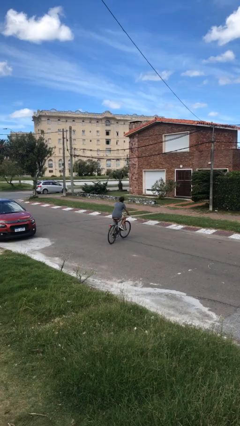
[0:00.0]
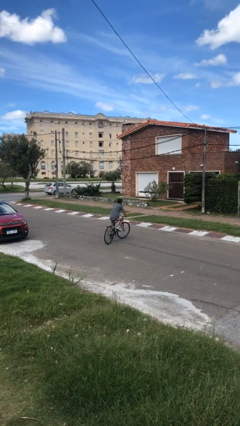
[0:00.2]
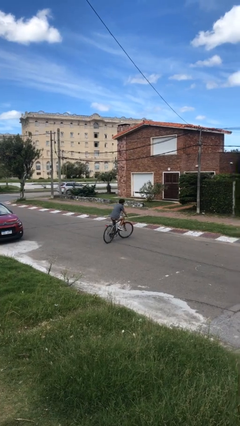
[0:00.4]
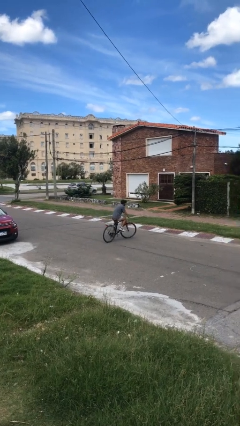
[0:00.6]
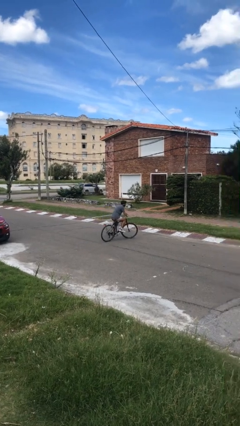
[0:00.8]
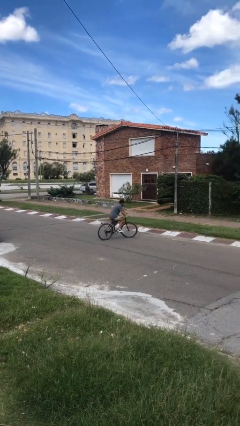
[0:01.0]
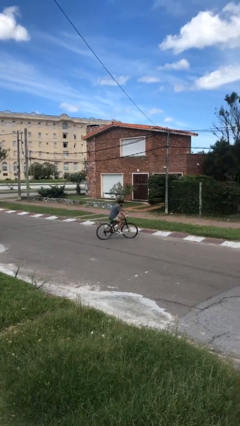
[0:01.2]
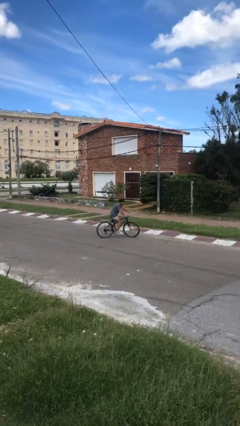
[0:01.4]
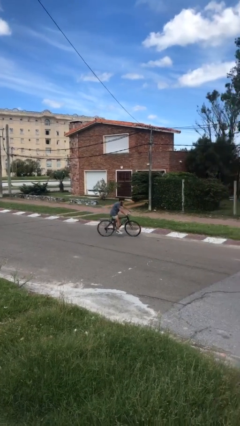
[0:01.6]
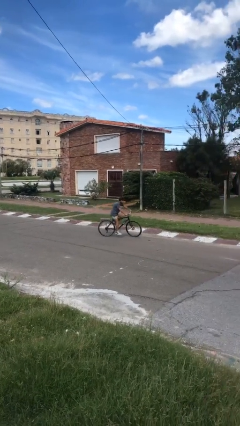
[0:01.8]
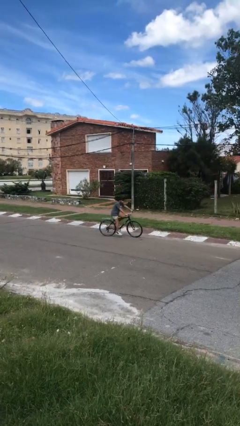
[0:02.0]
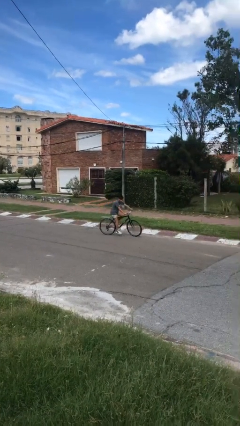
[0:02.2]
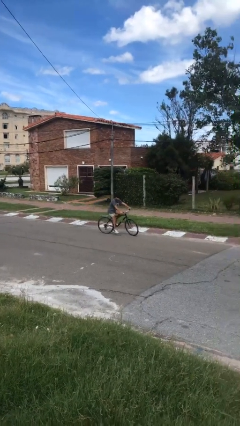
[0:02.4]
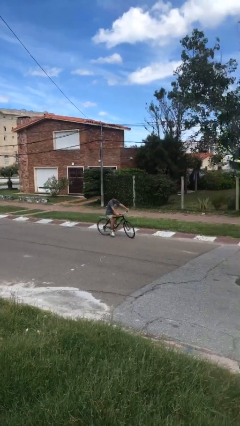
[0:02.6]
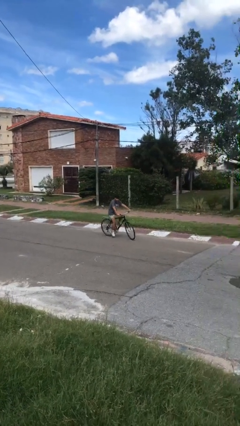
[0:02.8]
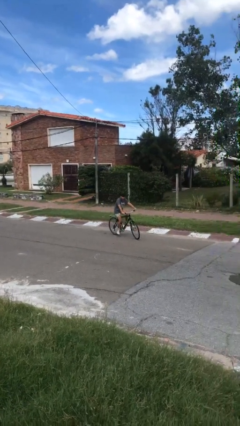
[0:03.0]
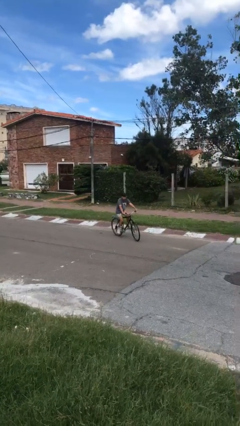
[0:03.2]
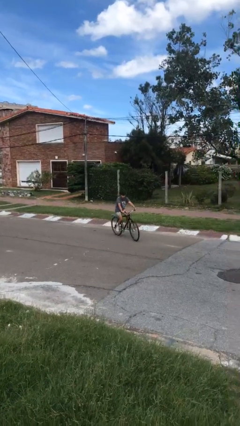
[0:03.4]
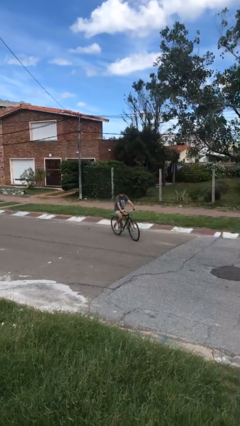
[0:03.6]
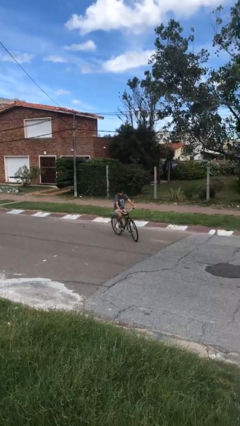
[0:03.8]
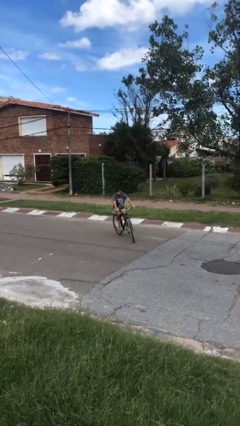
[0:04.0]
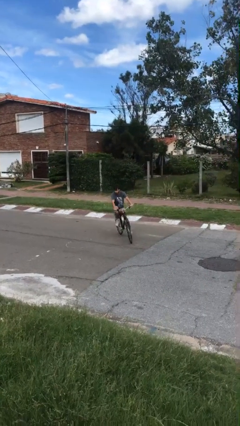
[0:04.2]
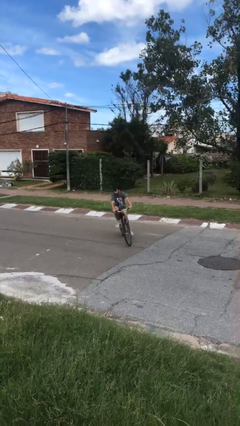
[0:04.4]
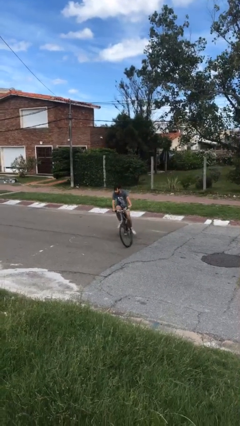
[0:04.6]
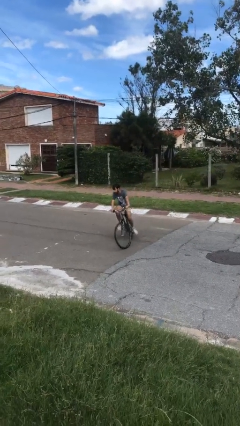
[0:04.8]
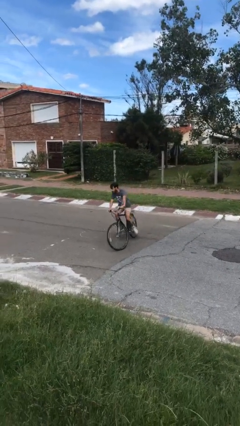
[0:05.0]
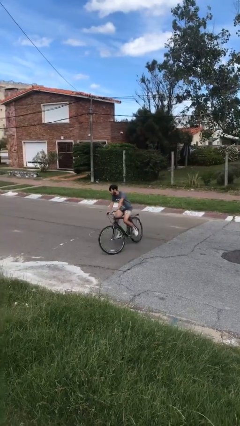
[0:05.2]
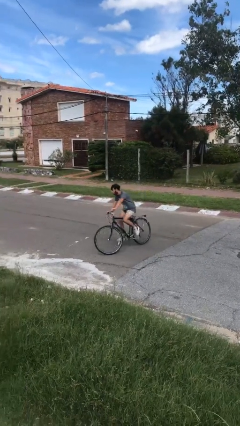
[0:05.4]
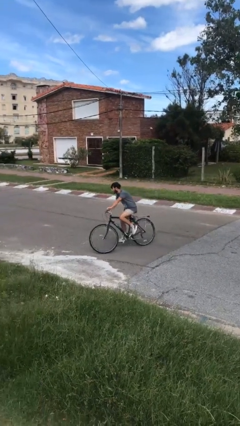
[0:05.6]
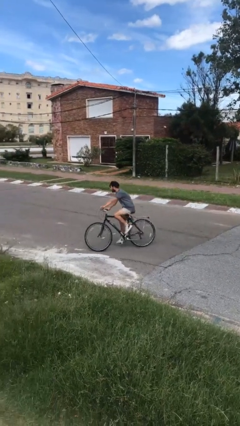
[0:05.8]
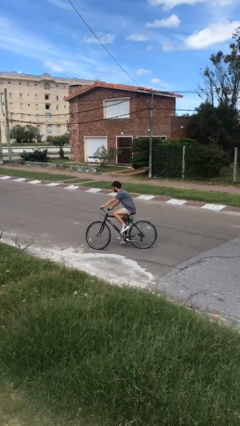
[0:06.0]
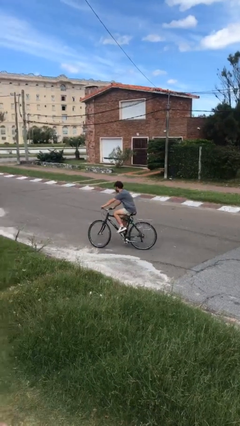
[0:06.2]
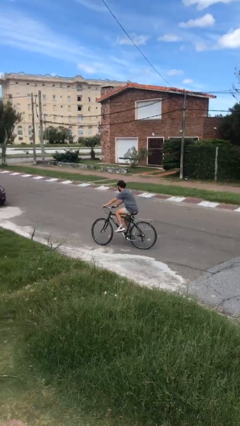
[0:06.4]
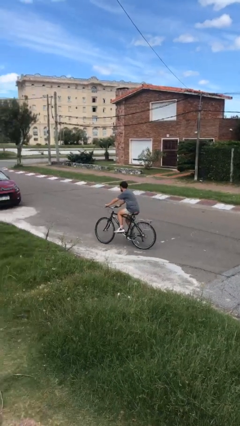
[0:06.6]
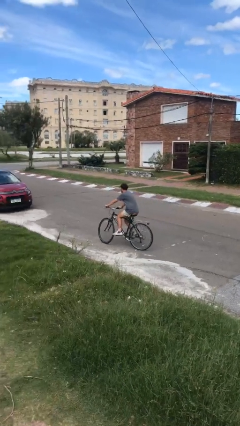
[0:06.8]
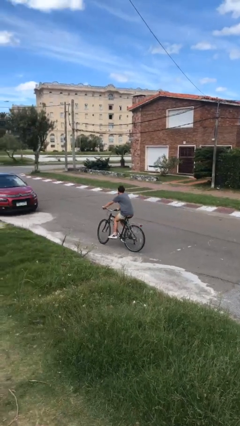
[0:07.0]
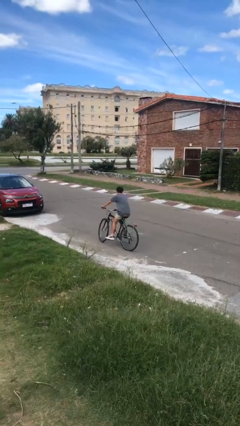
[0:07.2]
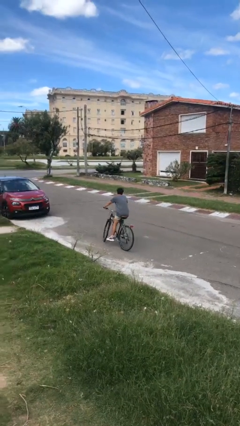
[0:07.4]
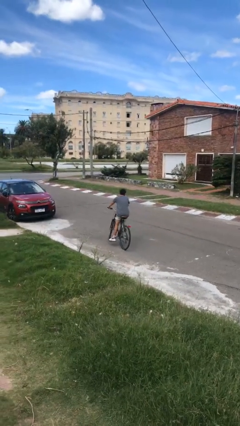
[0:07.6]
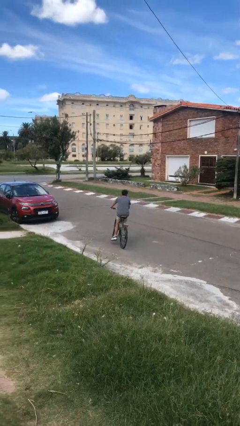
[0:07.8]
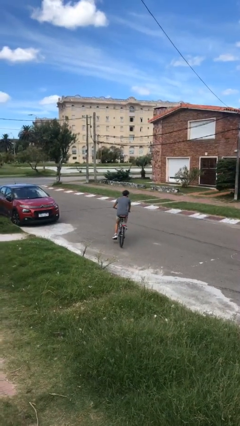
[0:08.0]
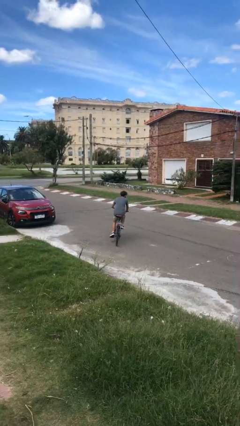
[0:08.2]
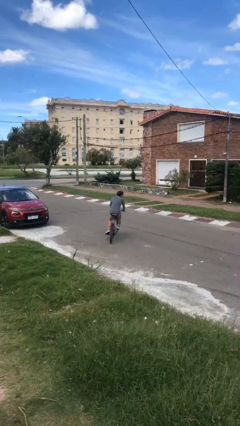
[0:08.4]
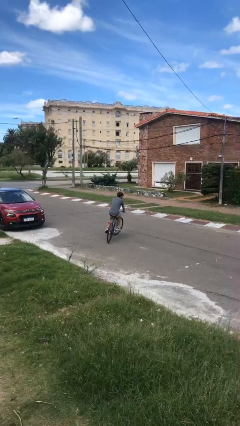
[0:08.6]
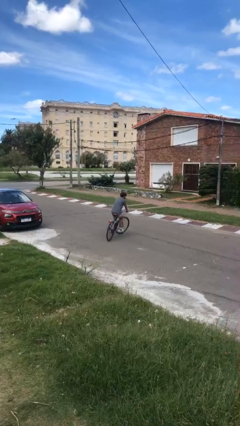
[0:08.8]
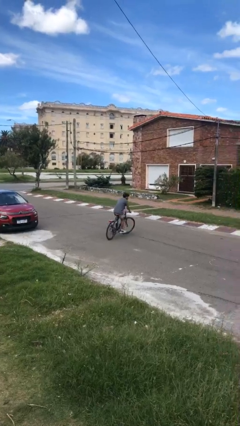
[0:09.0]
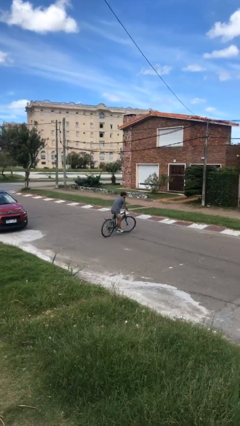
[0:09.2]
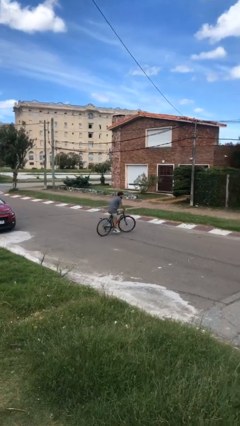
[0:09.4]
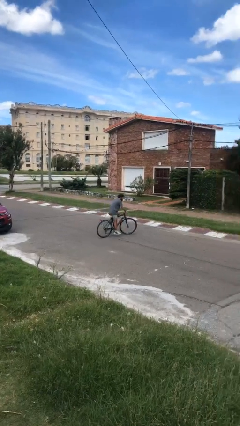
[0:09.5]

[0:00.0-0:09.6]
person rides bicycle

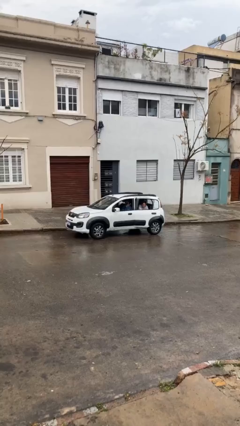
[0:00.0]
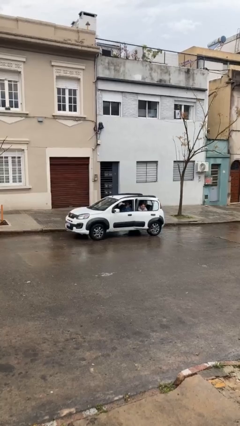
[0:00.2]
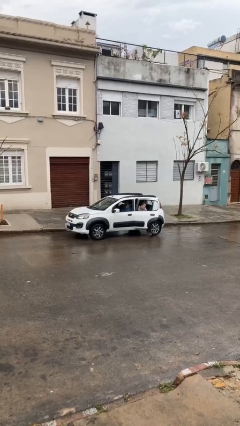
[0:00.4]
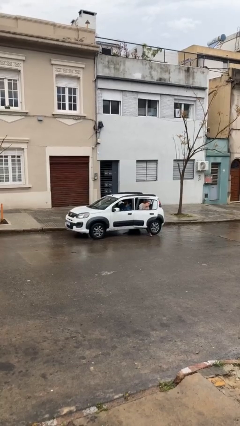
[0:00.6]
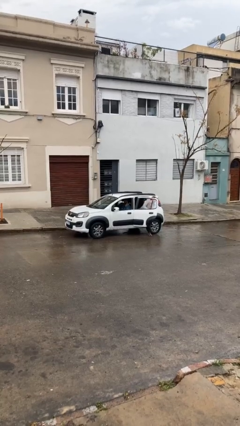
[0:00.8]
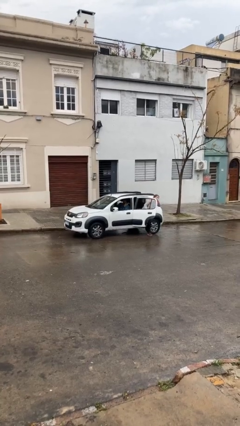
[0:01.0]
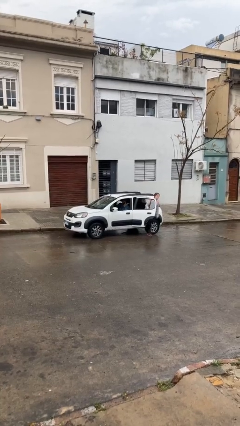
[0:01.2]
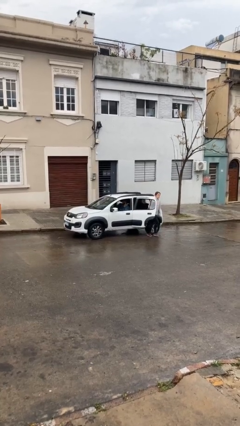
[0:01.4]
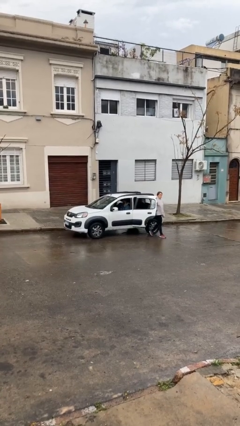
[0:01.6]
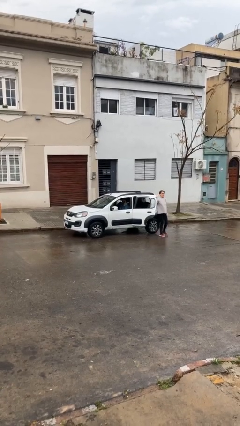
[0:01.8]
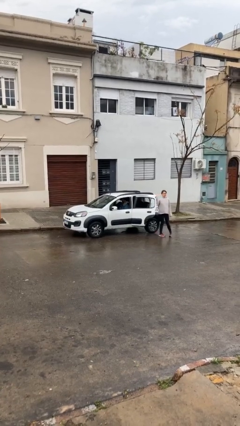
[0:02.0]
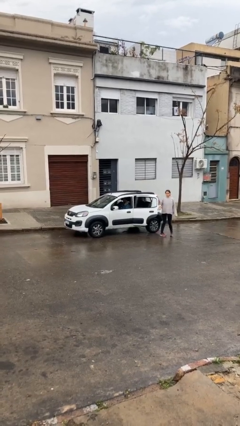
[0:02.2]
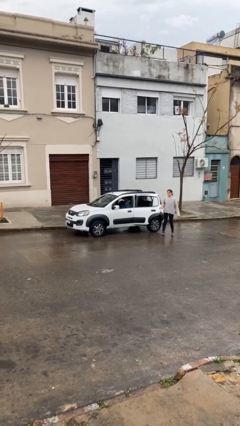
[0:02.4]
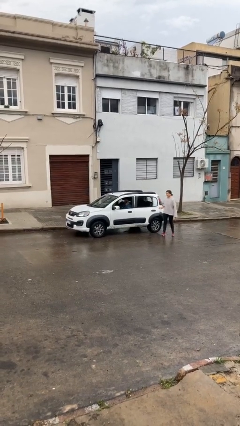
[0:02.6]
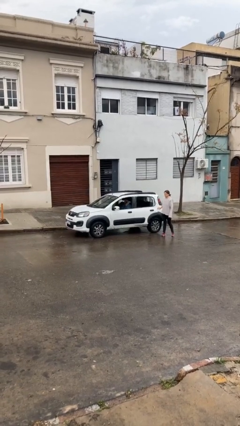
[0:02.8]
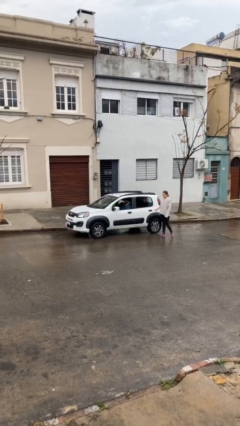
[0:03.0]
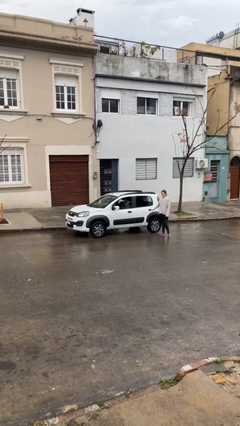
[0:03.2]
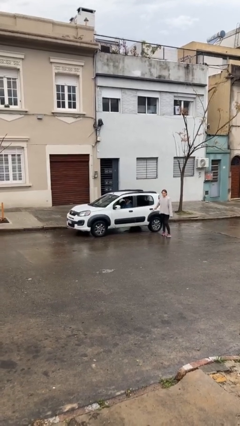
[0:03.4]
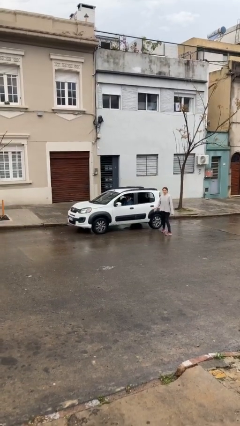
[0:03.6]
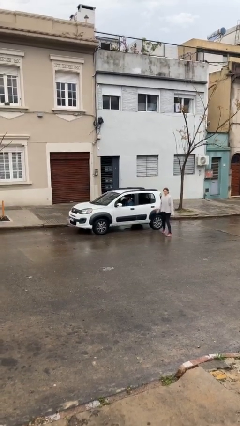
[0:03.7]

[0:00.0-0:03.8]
car drops off person

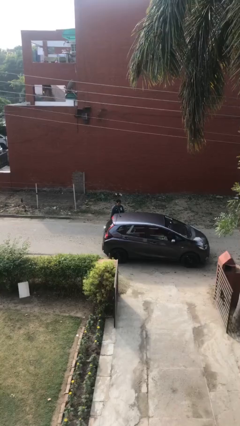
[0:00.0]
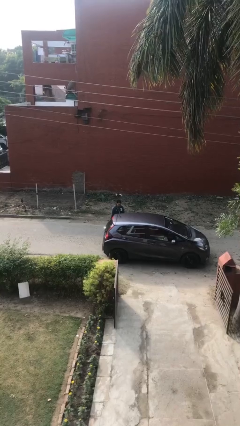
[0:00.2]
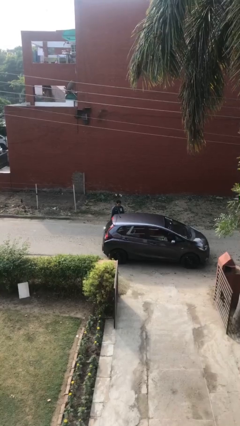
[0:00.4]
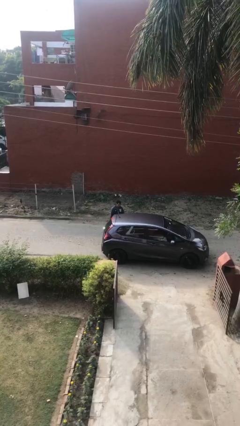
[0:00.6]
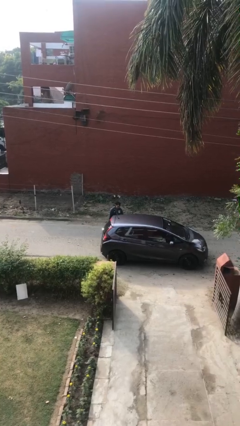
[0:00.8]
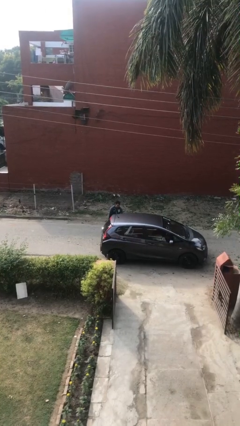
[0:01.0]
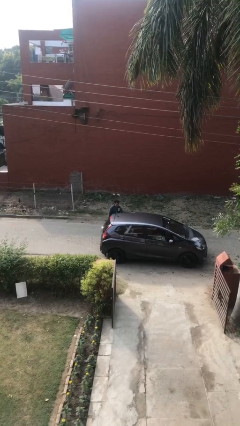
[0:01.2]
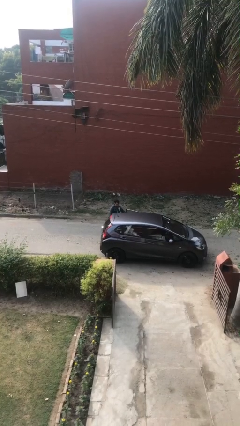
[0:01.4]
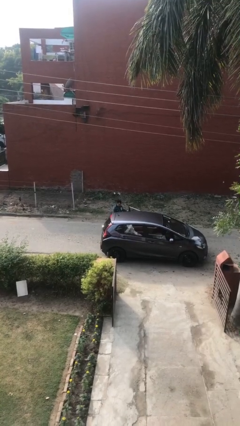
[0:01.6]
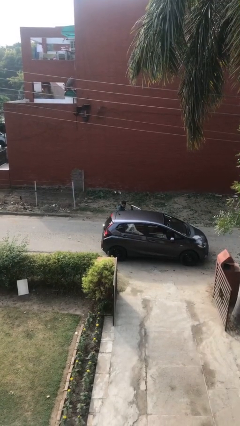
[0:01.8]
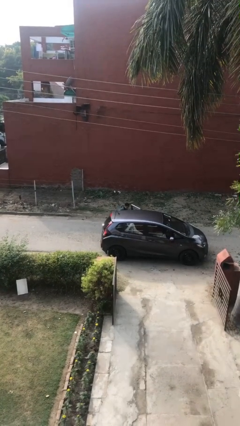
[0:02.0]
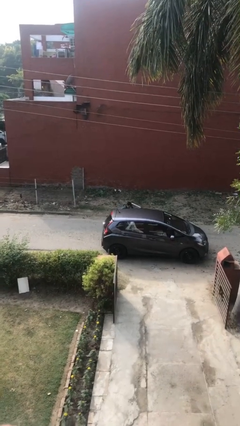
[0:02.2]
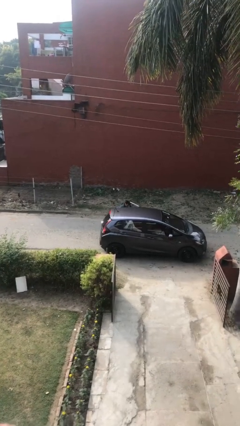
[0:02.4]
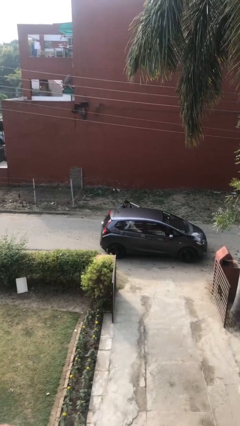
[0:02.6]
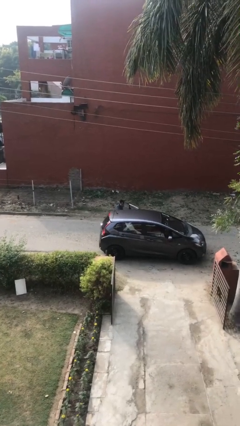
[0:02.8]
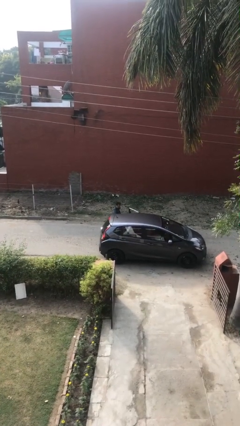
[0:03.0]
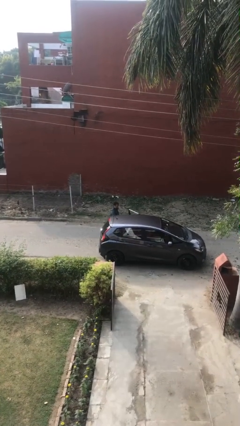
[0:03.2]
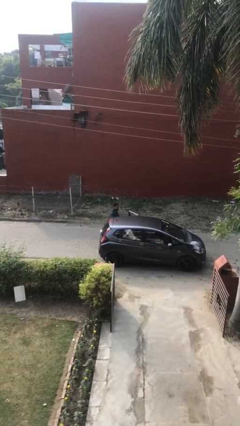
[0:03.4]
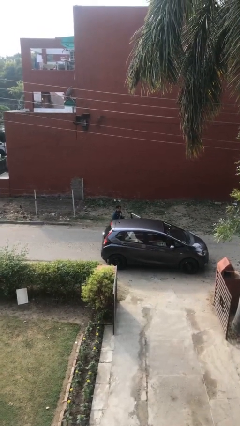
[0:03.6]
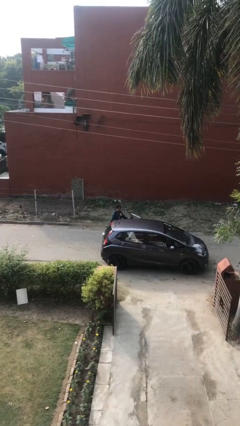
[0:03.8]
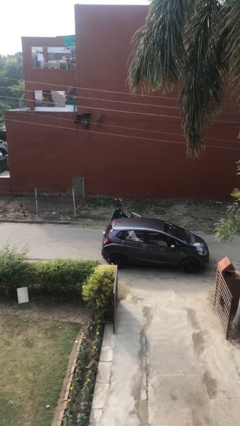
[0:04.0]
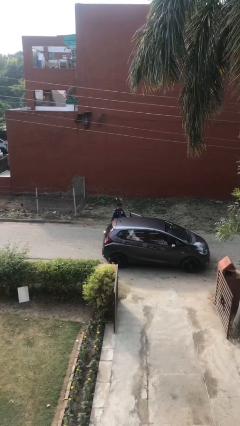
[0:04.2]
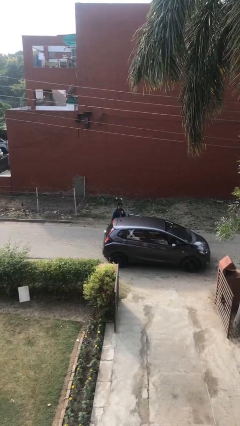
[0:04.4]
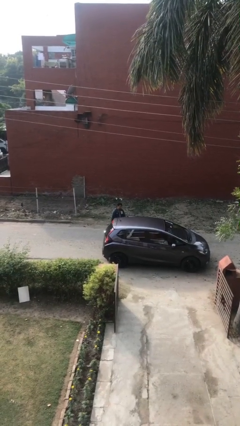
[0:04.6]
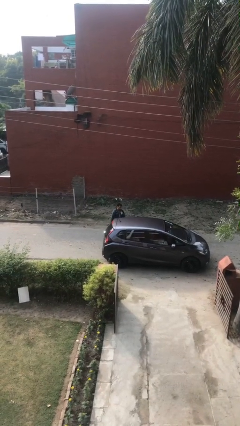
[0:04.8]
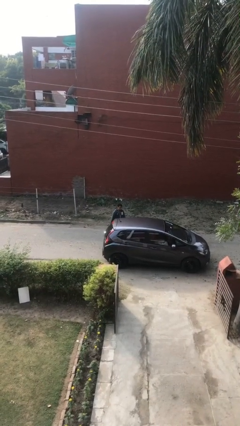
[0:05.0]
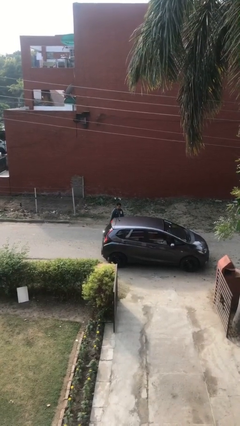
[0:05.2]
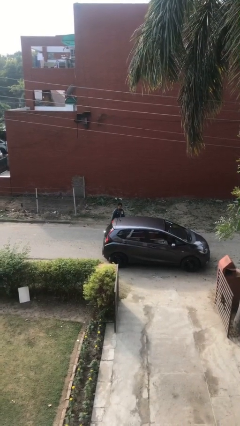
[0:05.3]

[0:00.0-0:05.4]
person unloads car
